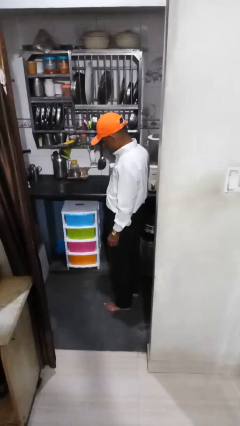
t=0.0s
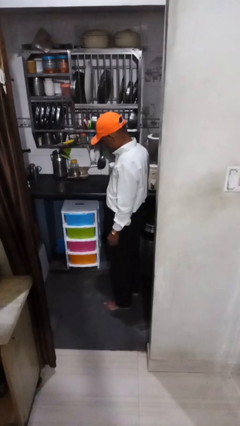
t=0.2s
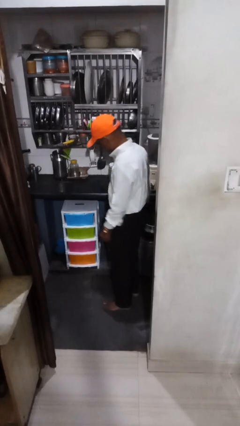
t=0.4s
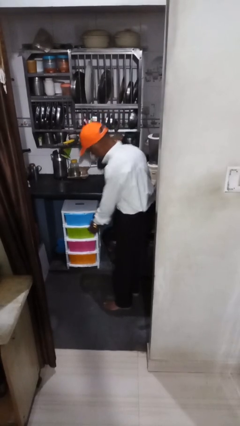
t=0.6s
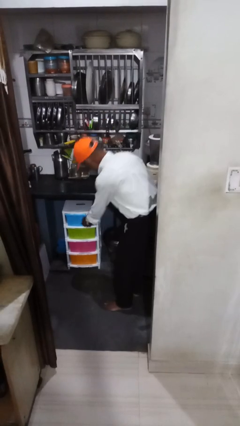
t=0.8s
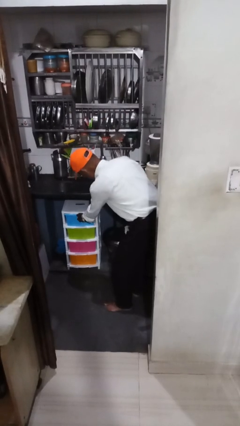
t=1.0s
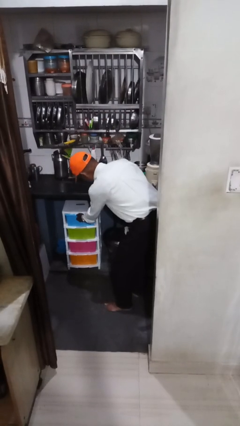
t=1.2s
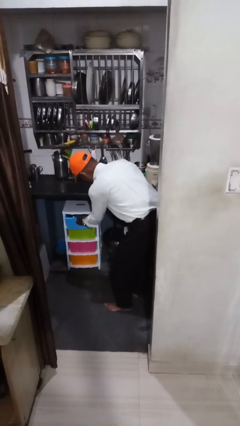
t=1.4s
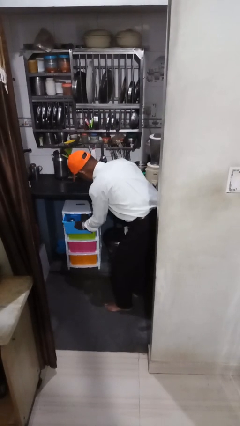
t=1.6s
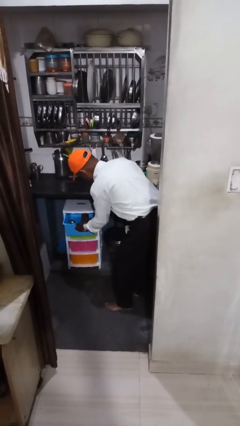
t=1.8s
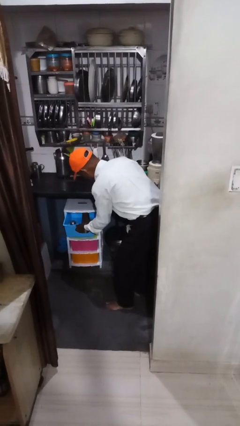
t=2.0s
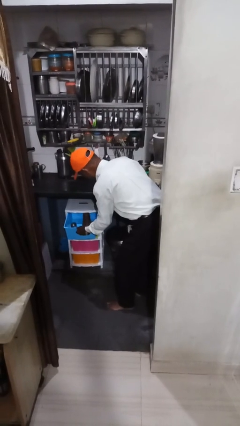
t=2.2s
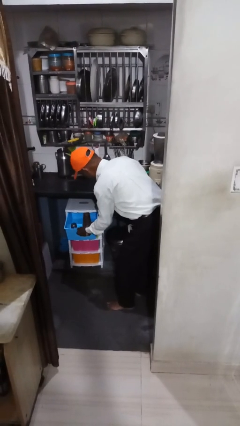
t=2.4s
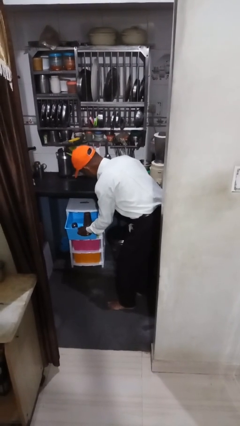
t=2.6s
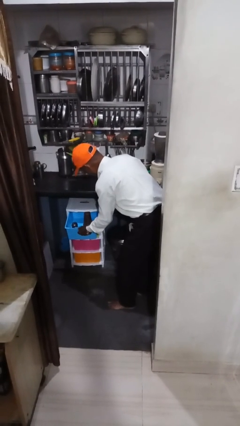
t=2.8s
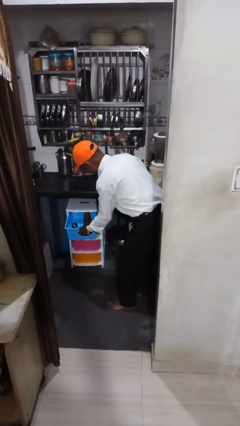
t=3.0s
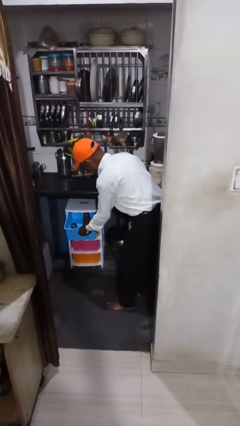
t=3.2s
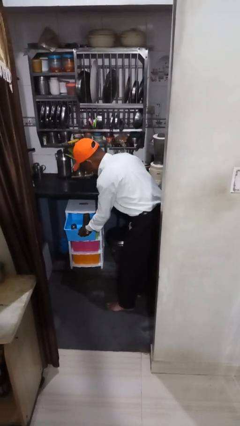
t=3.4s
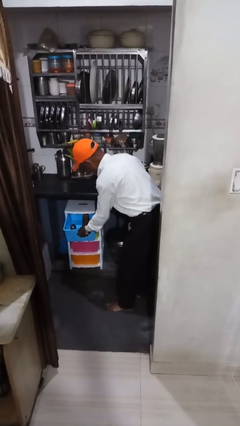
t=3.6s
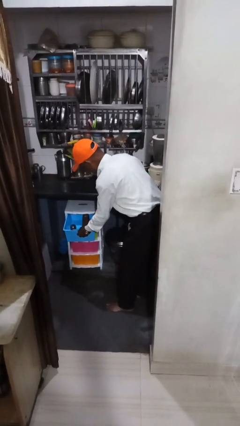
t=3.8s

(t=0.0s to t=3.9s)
person opens kitchen drawer

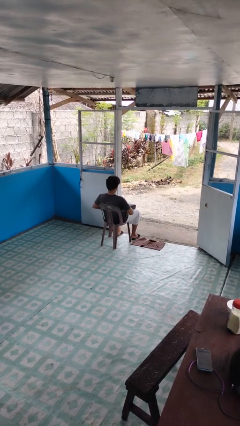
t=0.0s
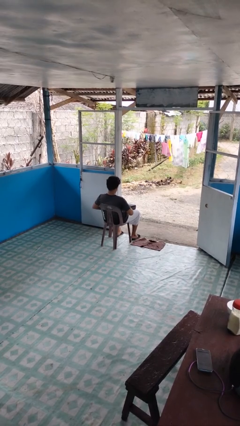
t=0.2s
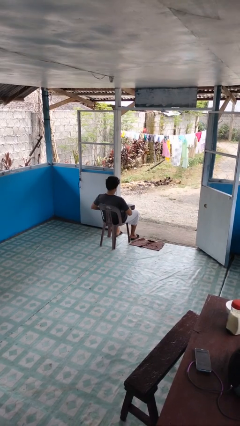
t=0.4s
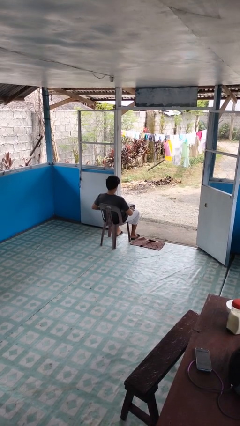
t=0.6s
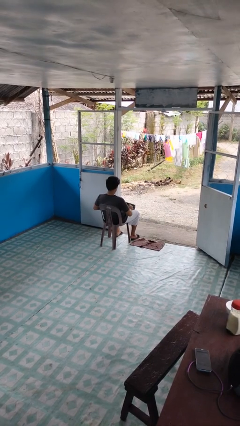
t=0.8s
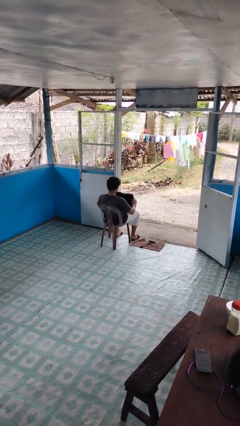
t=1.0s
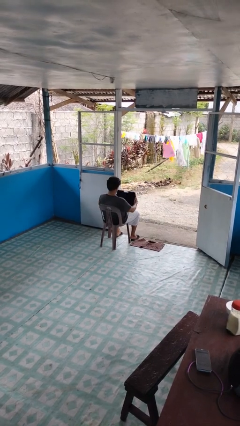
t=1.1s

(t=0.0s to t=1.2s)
person opens suitcase

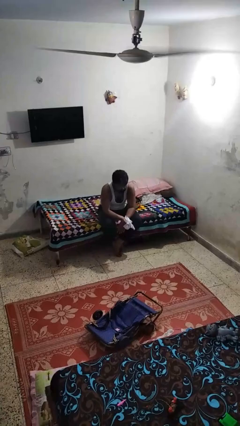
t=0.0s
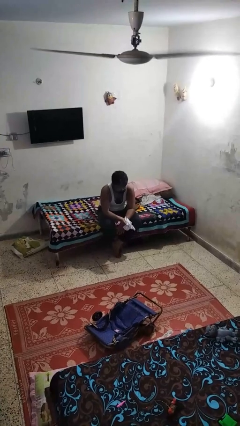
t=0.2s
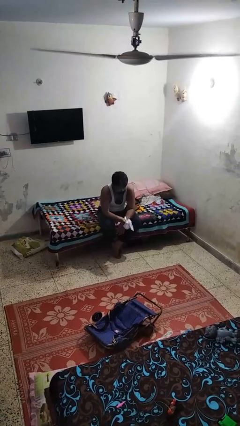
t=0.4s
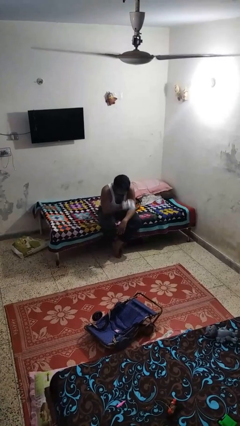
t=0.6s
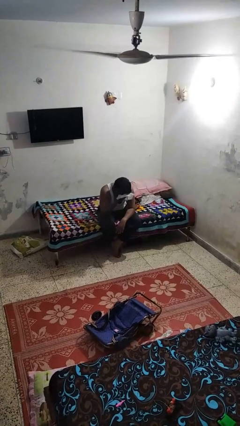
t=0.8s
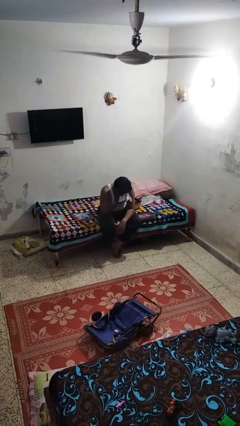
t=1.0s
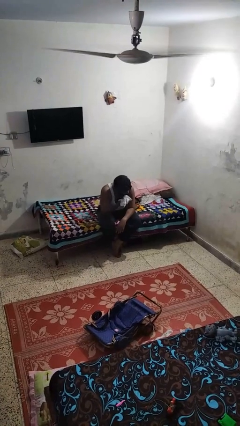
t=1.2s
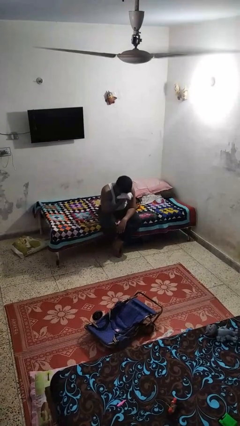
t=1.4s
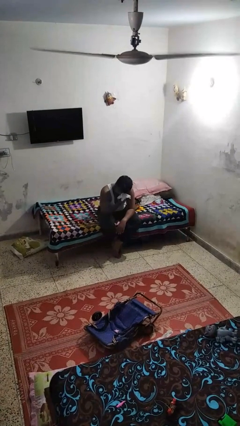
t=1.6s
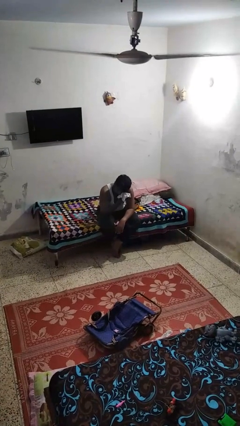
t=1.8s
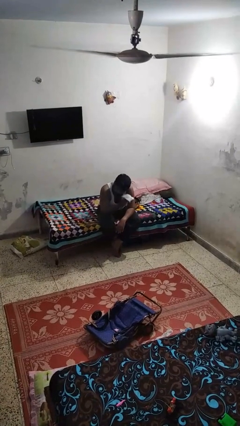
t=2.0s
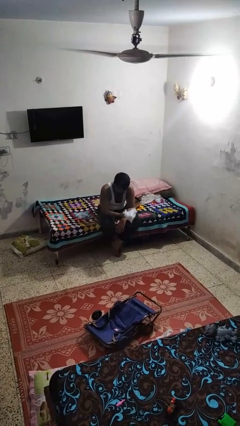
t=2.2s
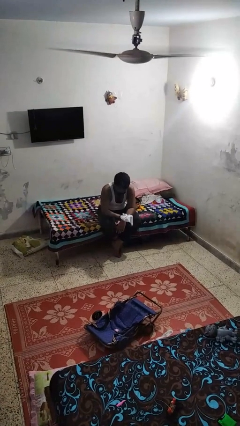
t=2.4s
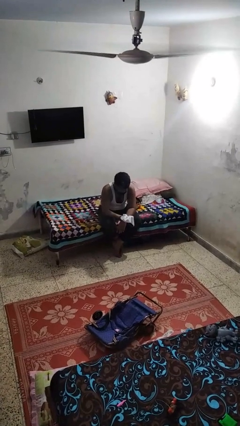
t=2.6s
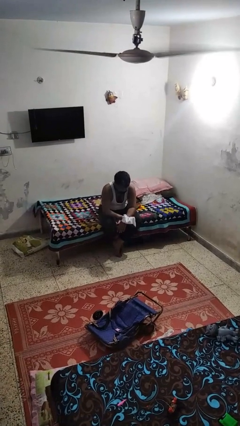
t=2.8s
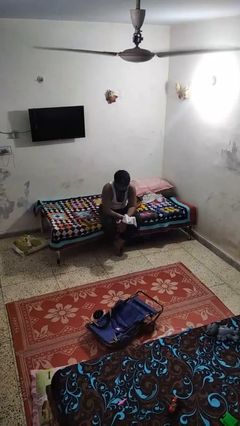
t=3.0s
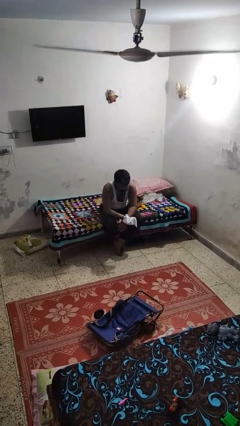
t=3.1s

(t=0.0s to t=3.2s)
person wipes mouth with napkin

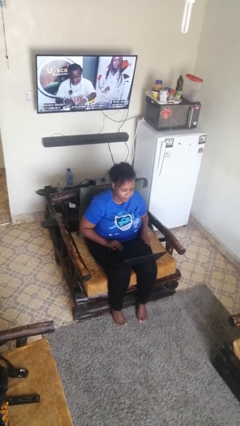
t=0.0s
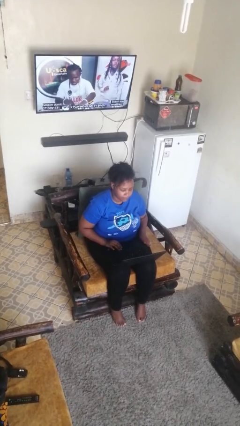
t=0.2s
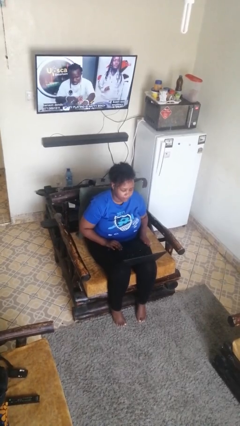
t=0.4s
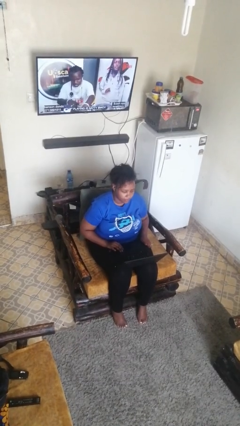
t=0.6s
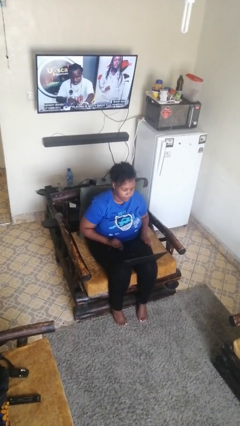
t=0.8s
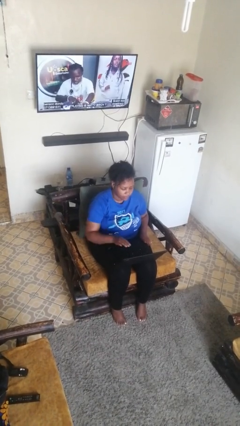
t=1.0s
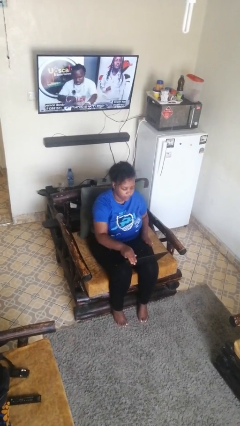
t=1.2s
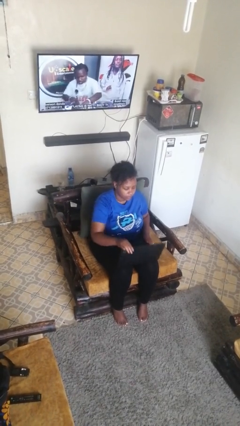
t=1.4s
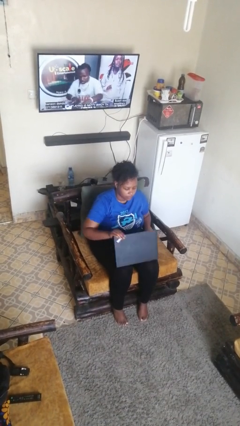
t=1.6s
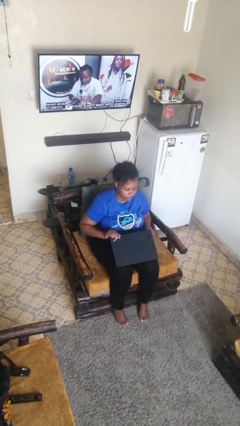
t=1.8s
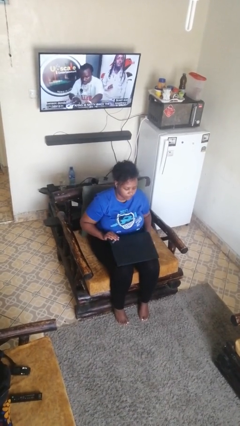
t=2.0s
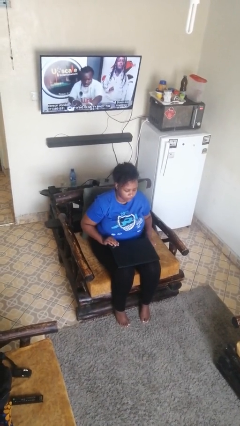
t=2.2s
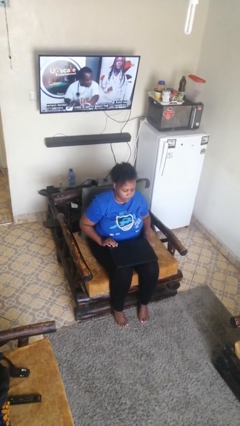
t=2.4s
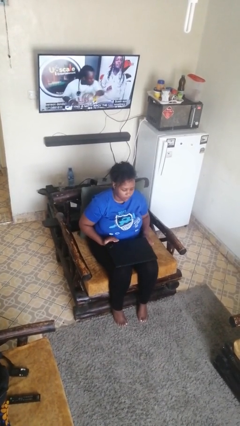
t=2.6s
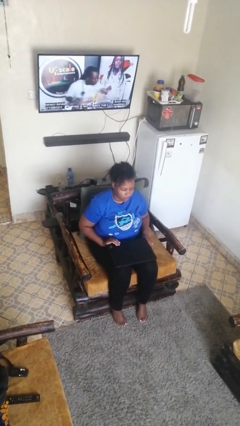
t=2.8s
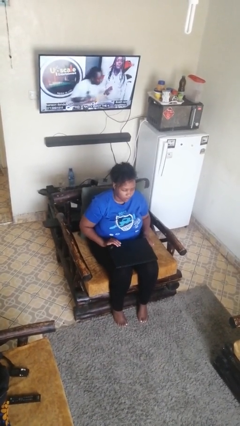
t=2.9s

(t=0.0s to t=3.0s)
person closes laptop

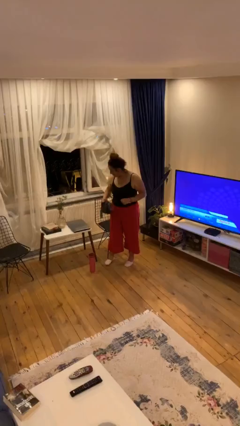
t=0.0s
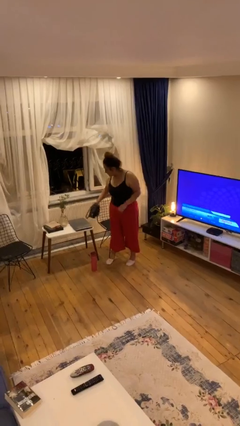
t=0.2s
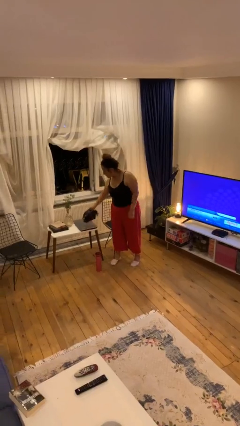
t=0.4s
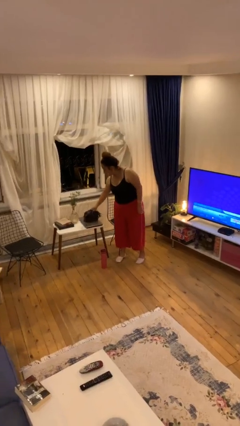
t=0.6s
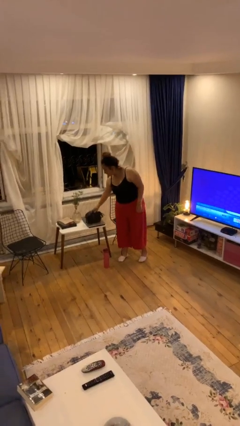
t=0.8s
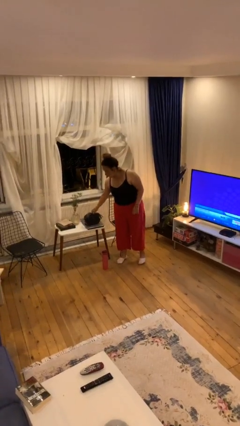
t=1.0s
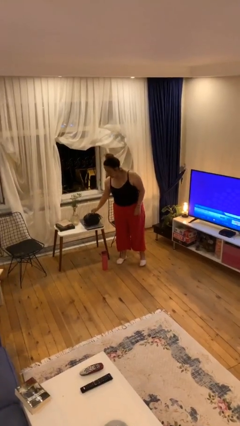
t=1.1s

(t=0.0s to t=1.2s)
person puts down object on table

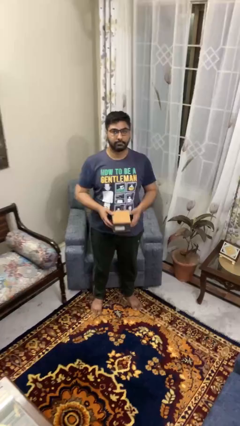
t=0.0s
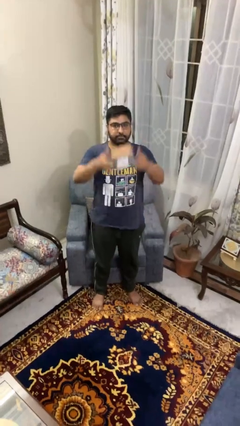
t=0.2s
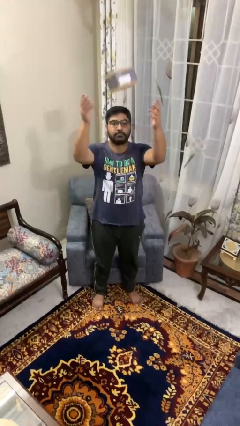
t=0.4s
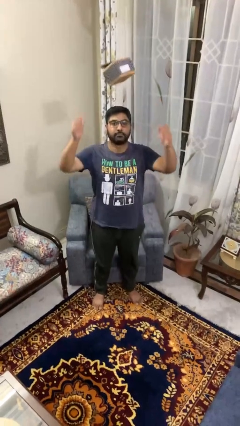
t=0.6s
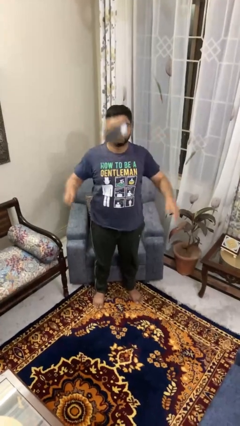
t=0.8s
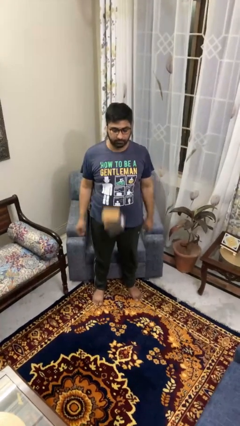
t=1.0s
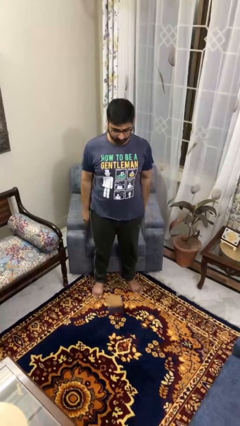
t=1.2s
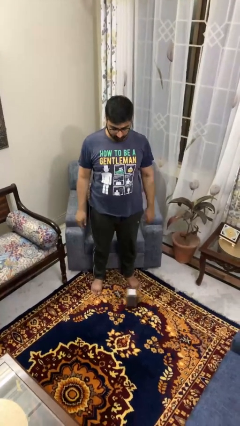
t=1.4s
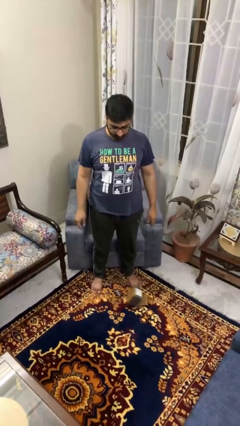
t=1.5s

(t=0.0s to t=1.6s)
person throws object into air

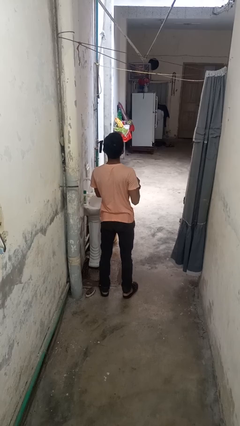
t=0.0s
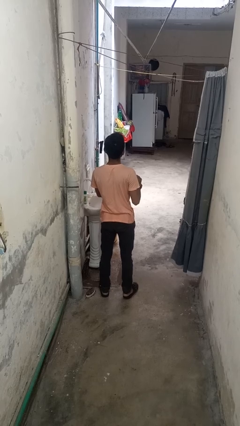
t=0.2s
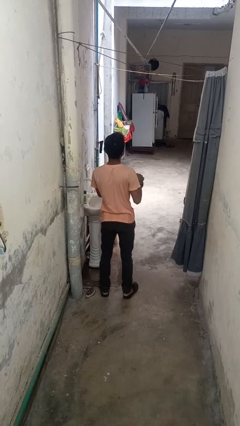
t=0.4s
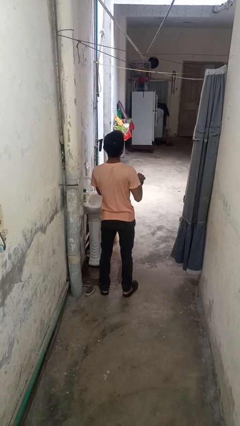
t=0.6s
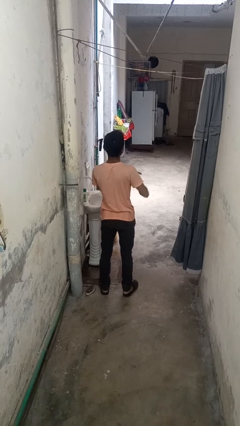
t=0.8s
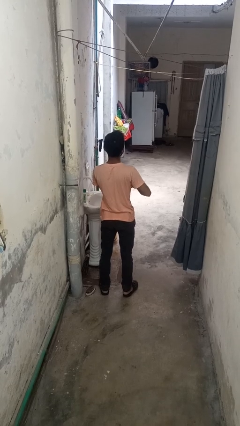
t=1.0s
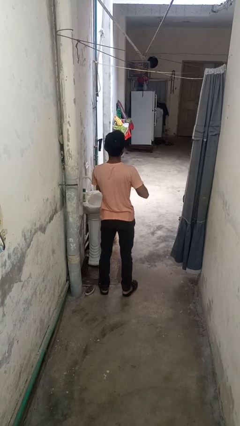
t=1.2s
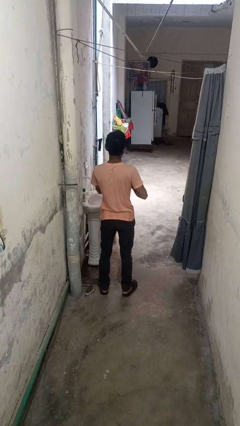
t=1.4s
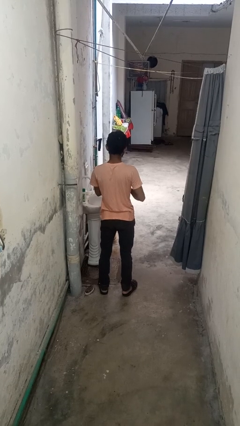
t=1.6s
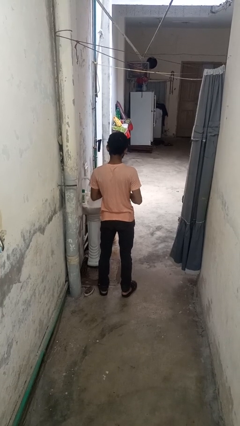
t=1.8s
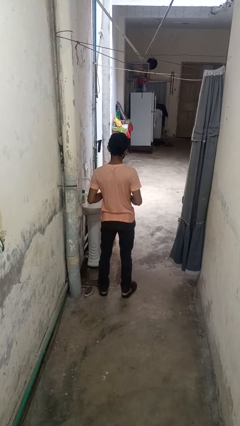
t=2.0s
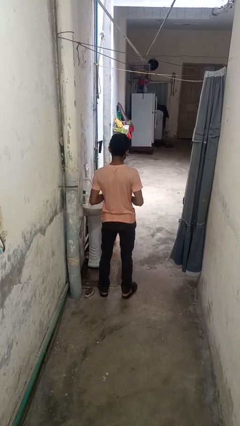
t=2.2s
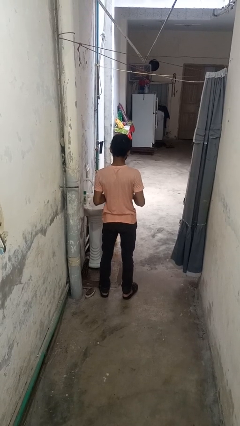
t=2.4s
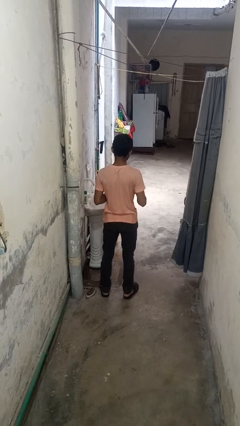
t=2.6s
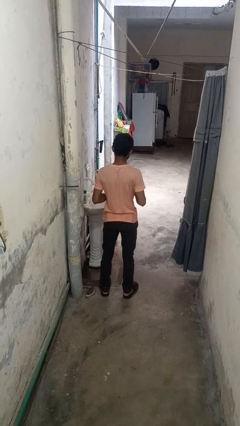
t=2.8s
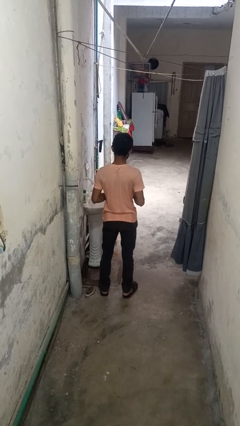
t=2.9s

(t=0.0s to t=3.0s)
person takes off wristwatch
